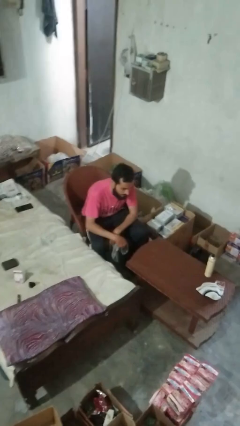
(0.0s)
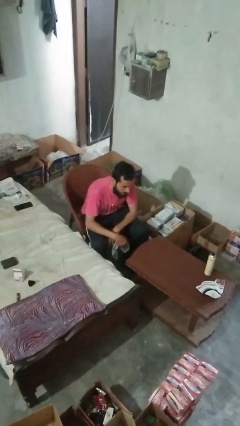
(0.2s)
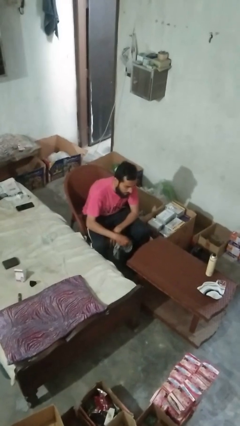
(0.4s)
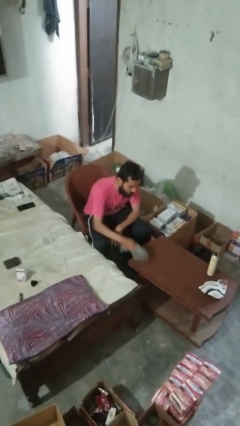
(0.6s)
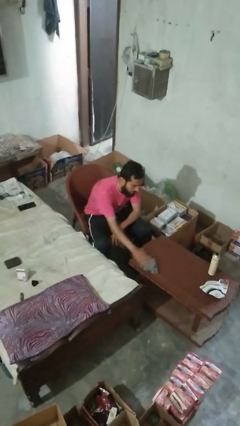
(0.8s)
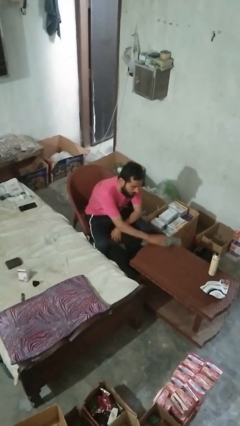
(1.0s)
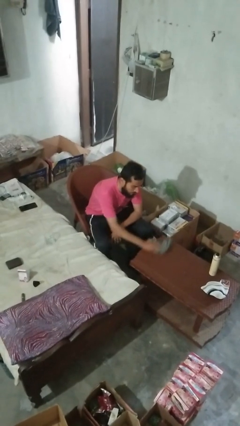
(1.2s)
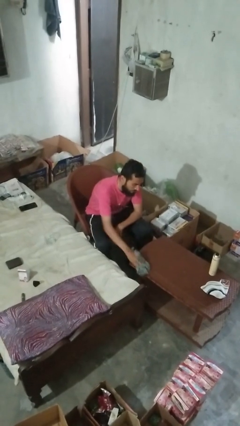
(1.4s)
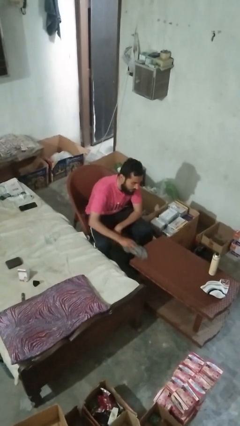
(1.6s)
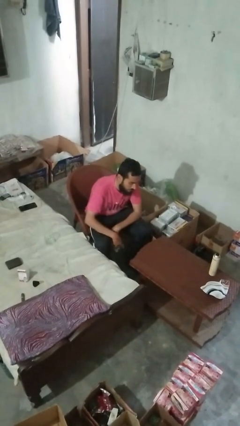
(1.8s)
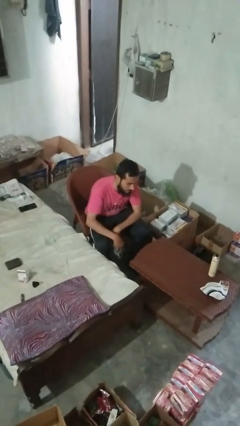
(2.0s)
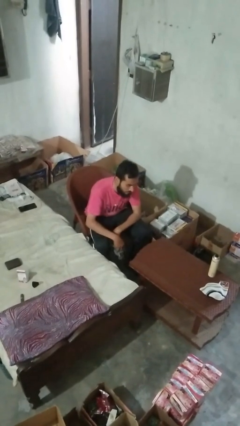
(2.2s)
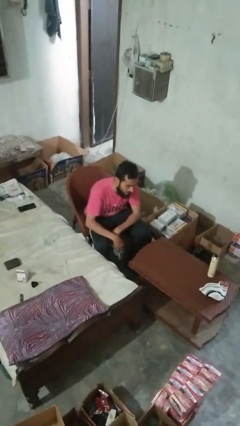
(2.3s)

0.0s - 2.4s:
person cleans table with rag

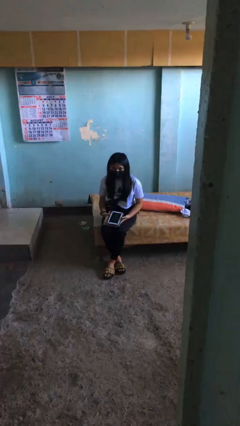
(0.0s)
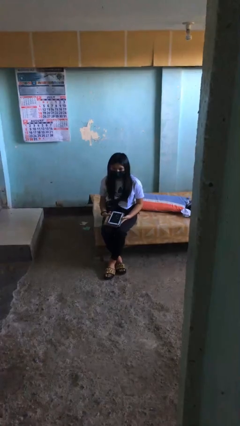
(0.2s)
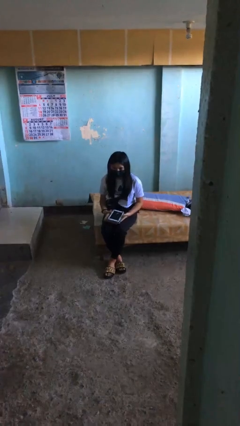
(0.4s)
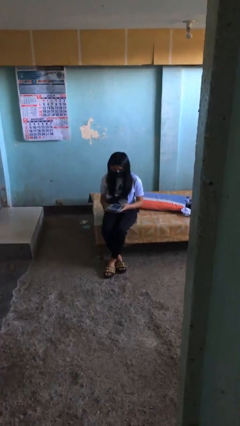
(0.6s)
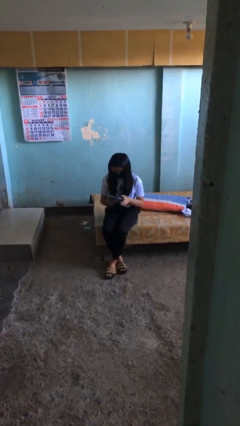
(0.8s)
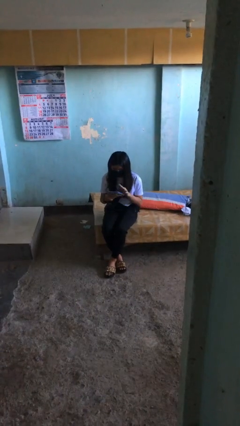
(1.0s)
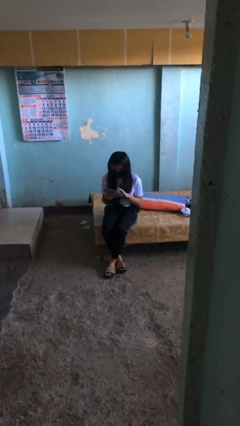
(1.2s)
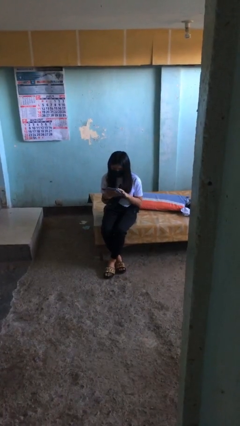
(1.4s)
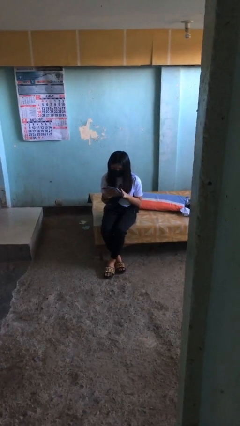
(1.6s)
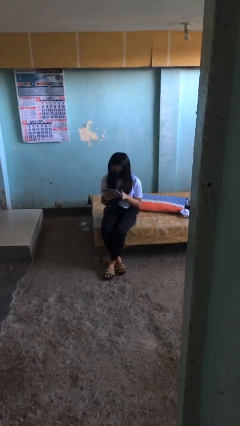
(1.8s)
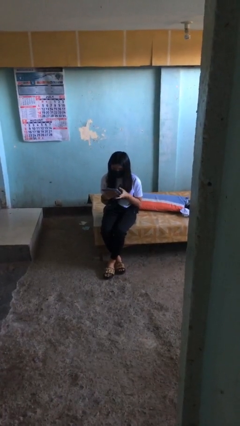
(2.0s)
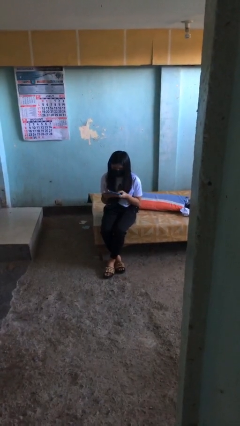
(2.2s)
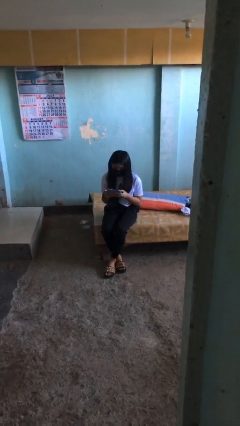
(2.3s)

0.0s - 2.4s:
person interacts with tablet

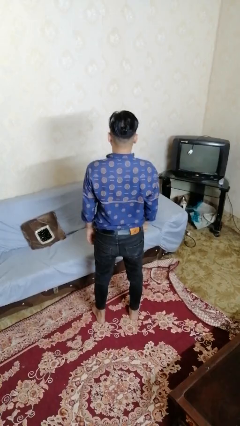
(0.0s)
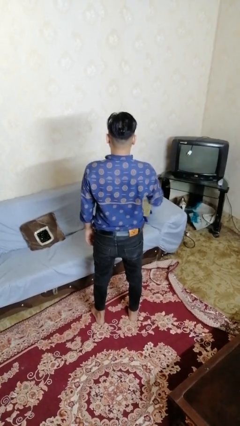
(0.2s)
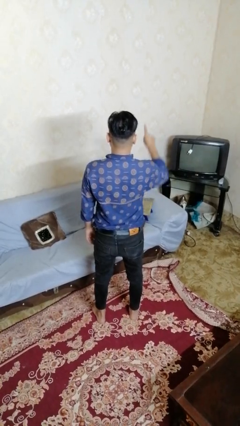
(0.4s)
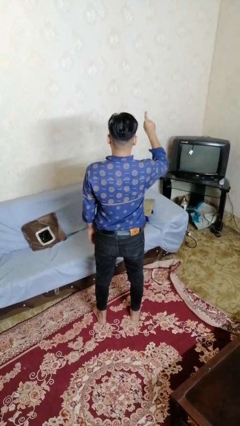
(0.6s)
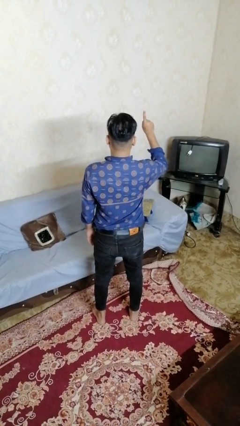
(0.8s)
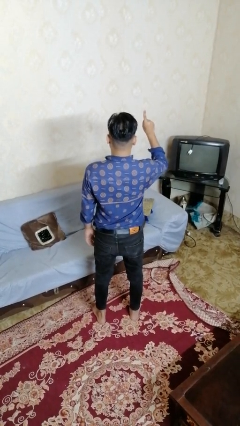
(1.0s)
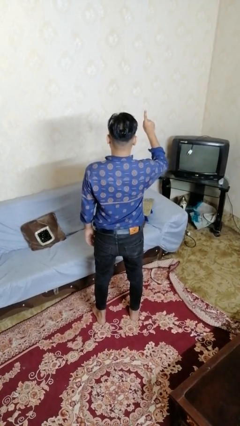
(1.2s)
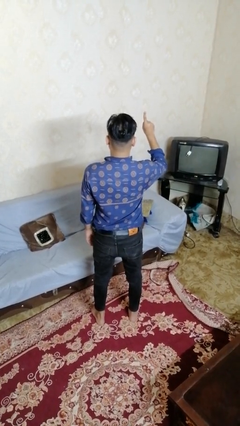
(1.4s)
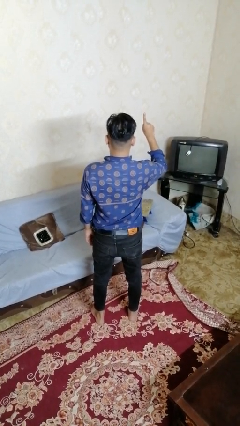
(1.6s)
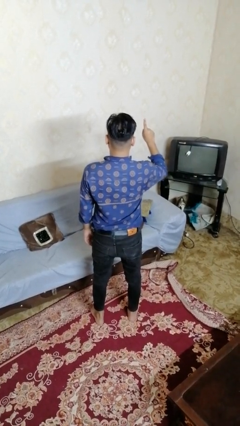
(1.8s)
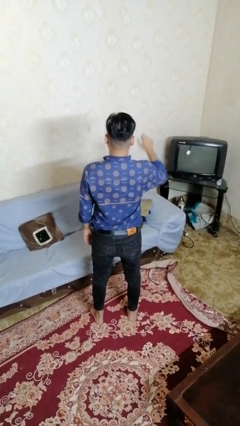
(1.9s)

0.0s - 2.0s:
person gestures number one

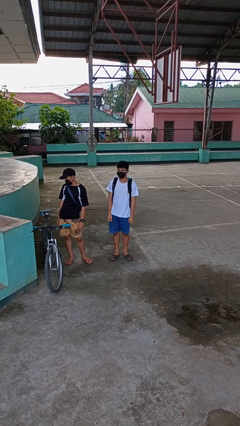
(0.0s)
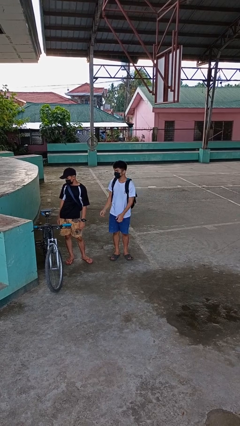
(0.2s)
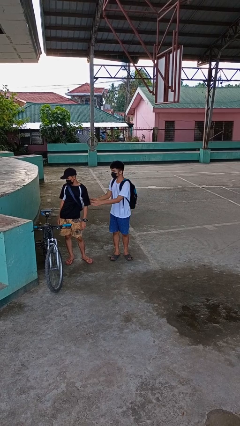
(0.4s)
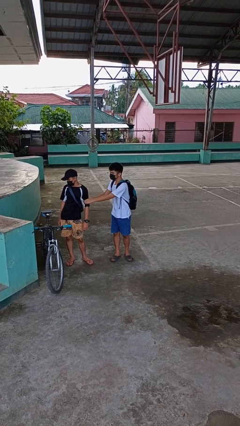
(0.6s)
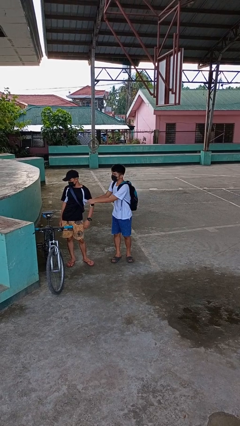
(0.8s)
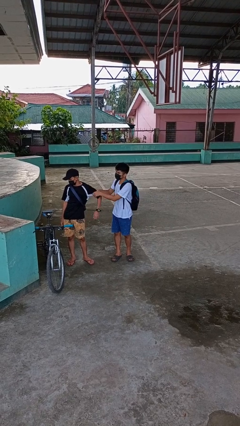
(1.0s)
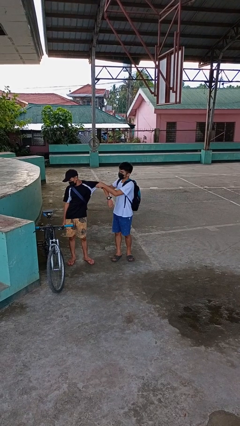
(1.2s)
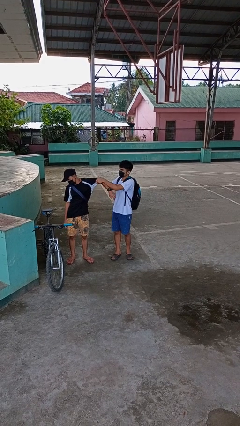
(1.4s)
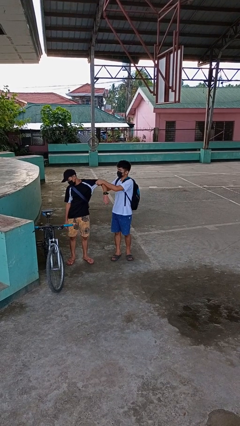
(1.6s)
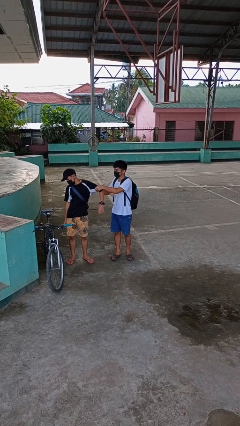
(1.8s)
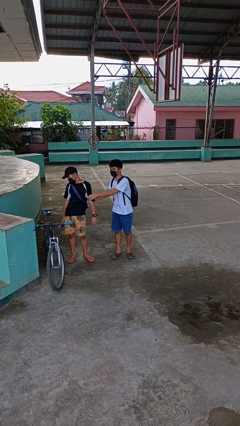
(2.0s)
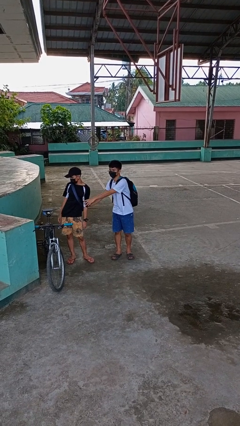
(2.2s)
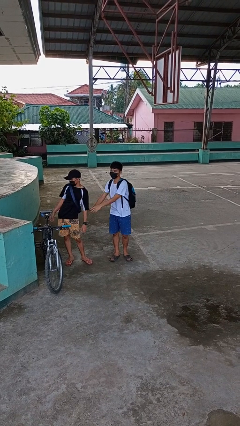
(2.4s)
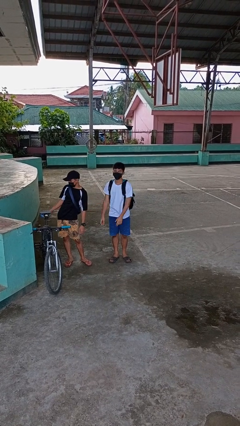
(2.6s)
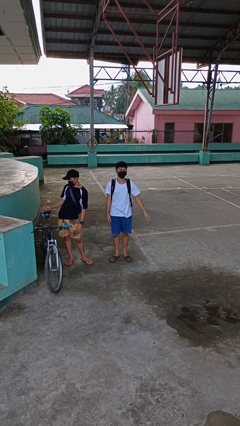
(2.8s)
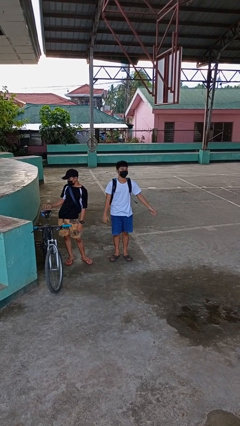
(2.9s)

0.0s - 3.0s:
person grabs person by bicep

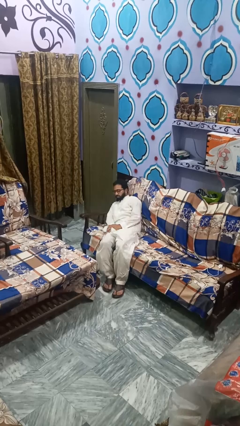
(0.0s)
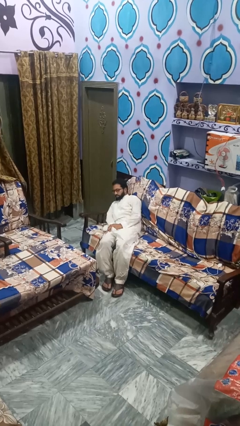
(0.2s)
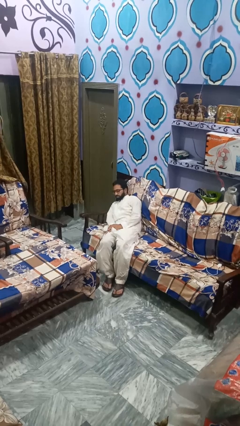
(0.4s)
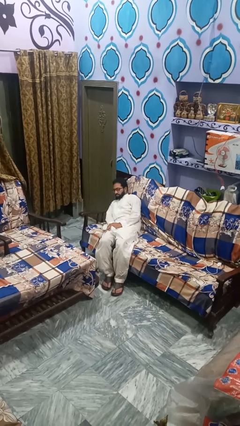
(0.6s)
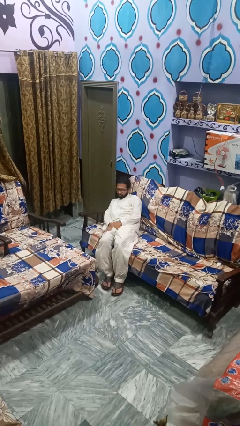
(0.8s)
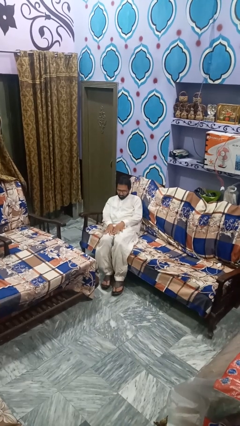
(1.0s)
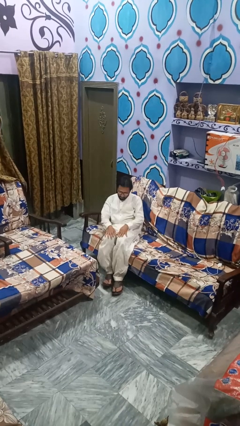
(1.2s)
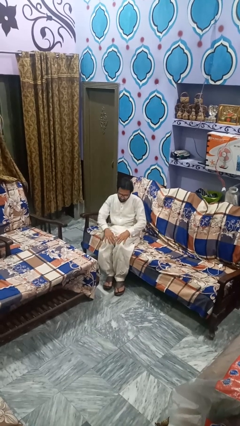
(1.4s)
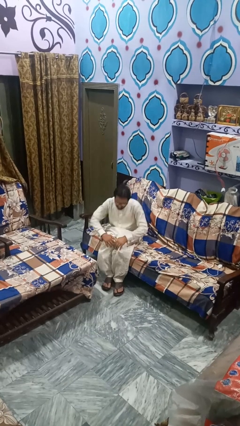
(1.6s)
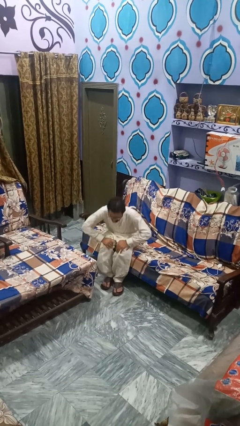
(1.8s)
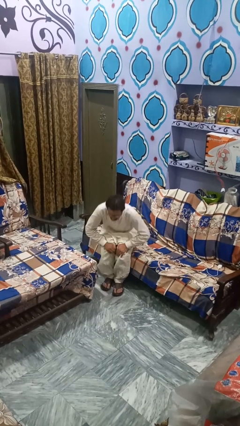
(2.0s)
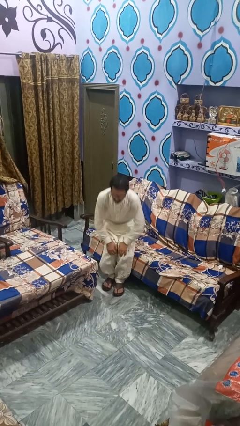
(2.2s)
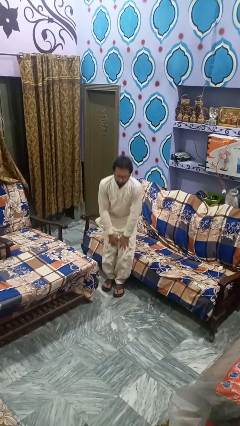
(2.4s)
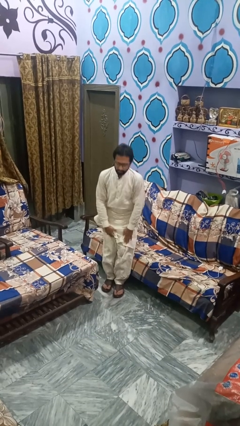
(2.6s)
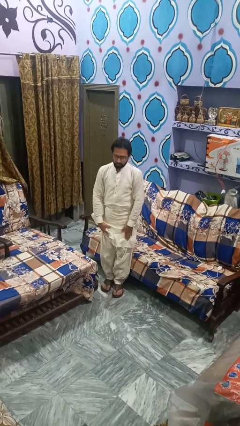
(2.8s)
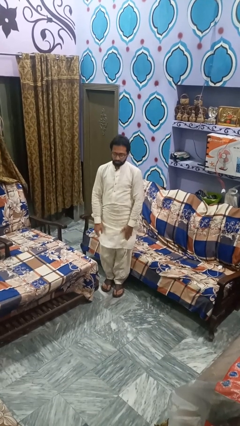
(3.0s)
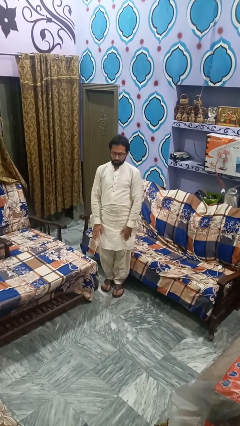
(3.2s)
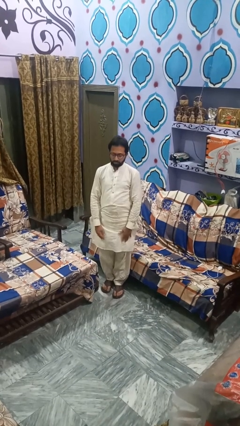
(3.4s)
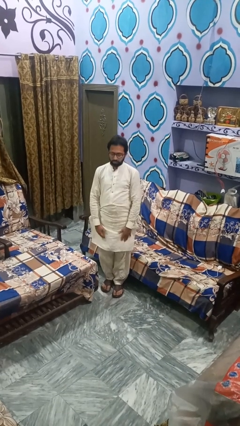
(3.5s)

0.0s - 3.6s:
person stands up

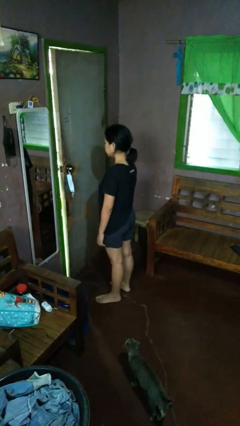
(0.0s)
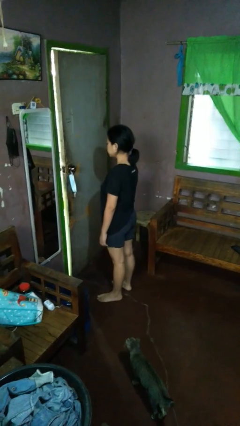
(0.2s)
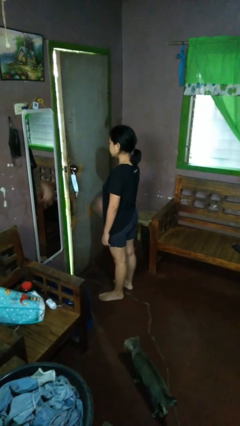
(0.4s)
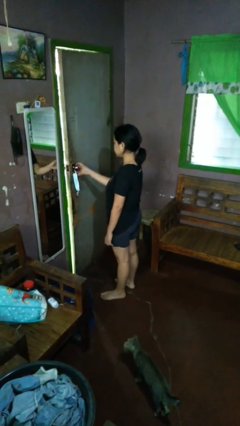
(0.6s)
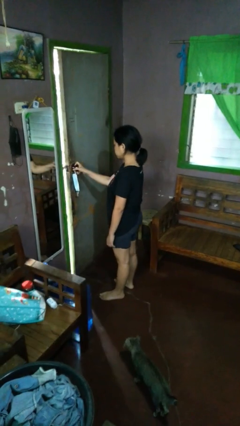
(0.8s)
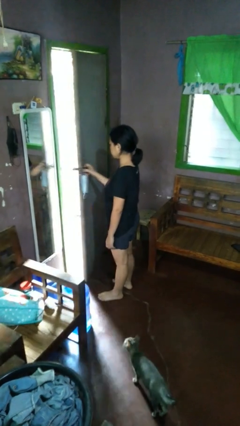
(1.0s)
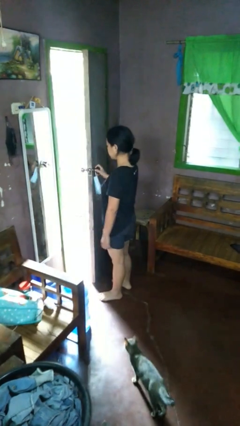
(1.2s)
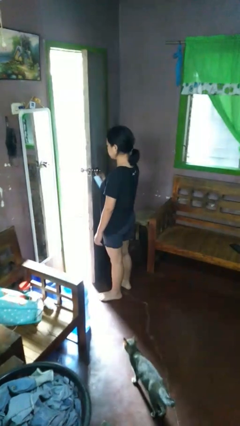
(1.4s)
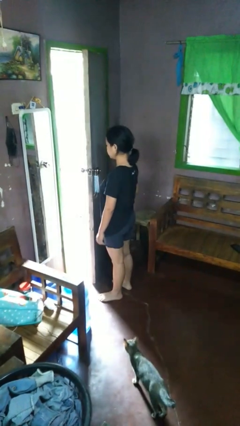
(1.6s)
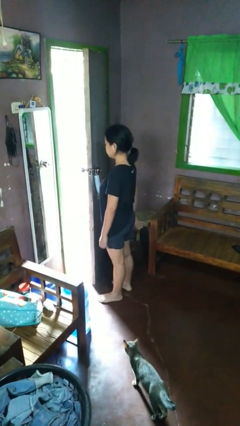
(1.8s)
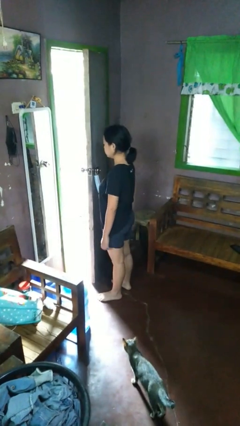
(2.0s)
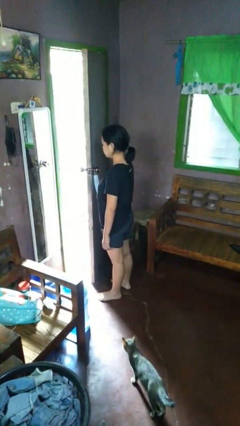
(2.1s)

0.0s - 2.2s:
person opens facility door

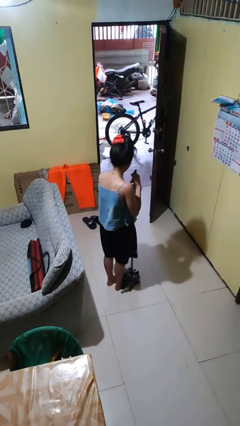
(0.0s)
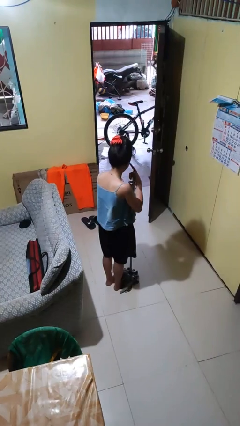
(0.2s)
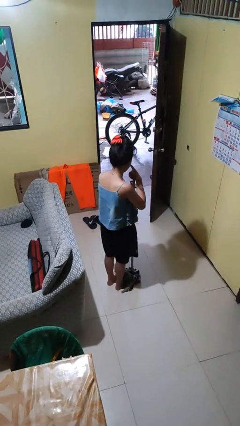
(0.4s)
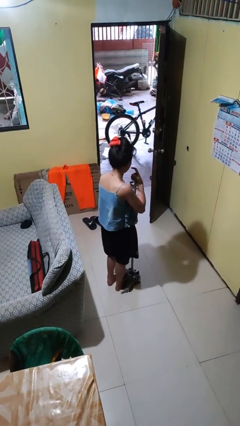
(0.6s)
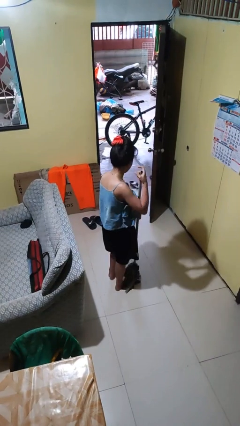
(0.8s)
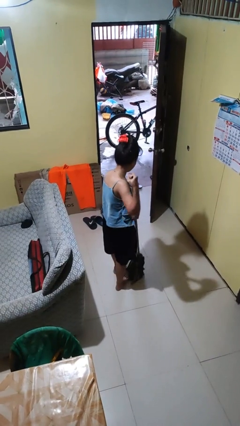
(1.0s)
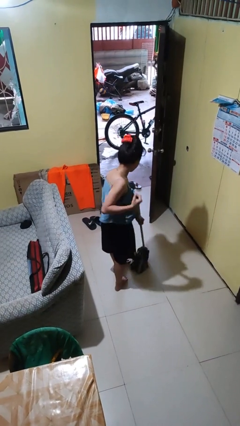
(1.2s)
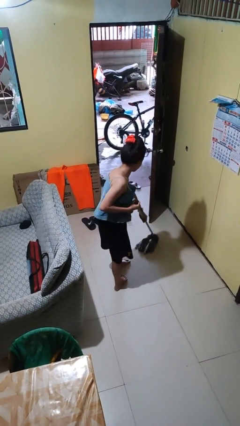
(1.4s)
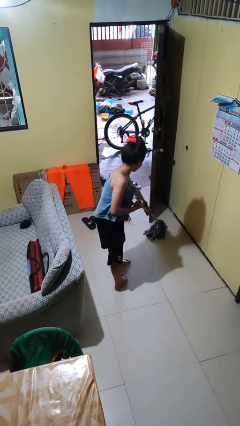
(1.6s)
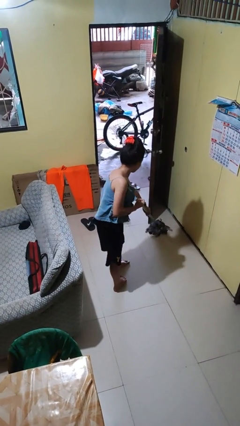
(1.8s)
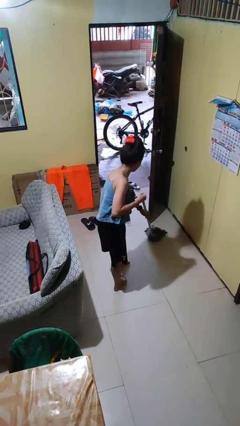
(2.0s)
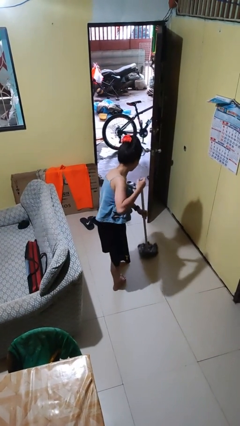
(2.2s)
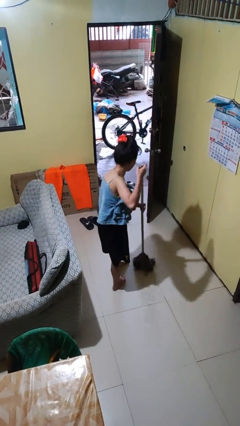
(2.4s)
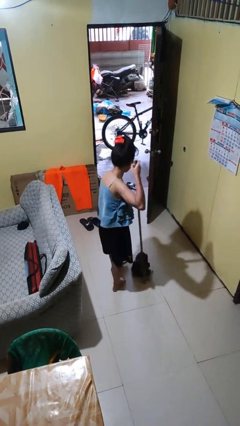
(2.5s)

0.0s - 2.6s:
person mops
